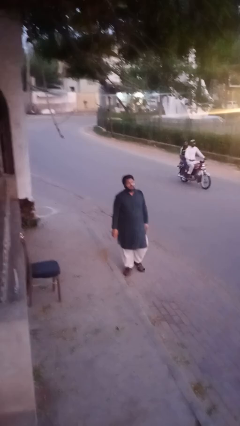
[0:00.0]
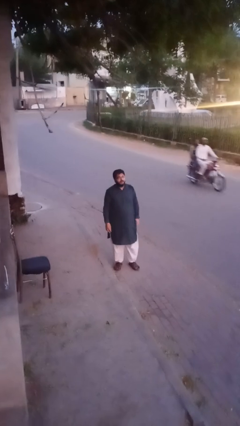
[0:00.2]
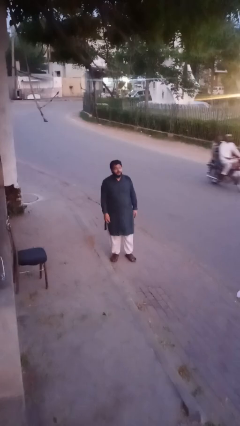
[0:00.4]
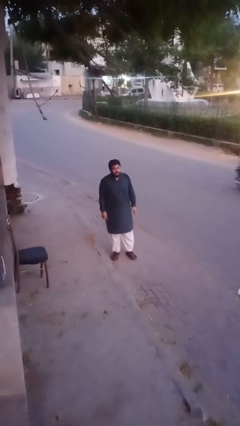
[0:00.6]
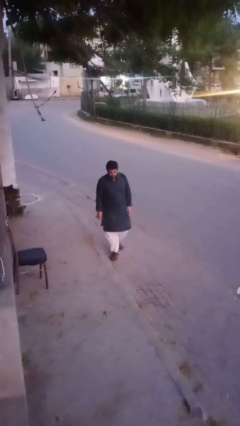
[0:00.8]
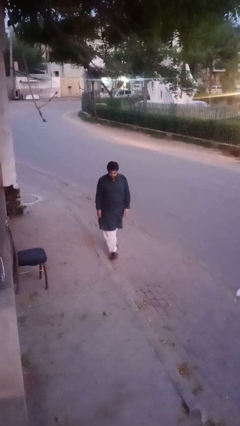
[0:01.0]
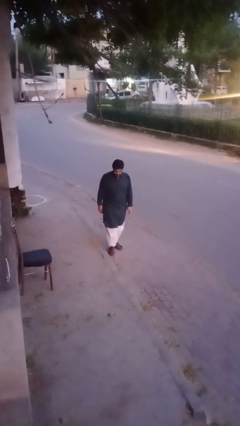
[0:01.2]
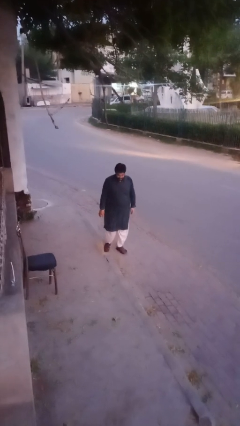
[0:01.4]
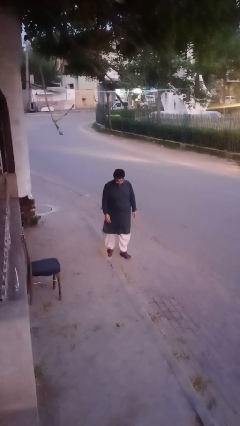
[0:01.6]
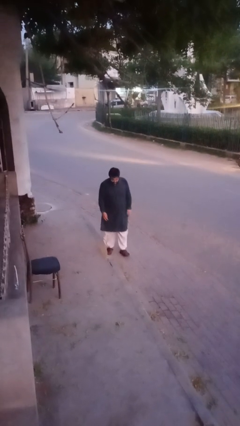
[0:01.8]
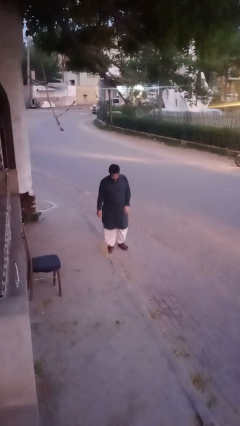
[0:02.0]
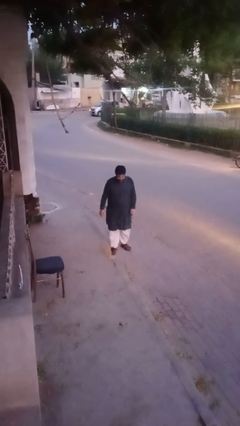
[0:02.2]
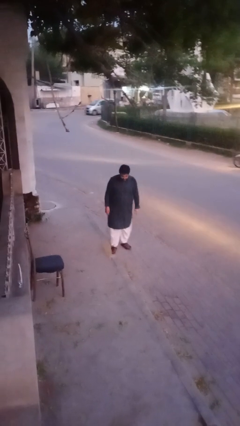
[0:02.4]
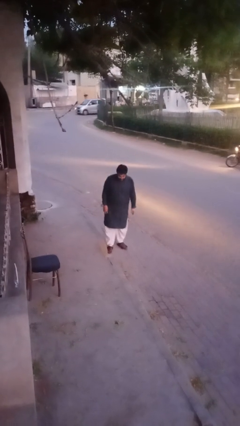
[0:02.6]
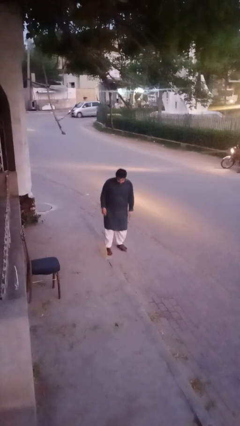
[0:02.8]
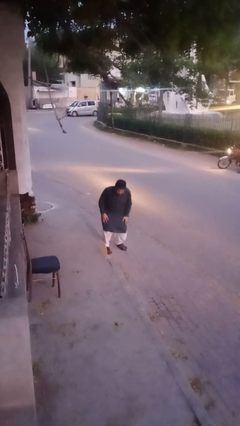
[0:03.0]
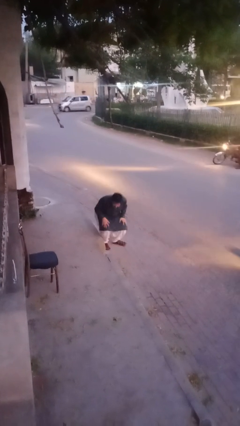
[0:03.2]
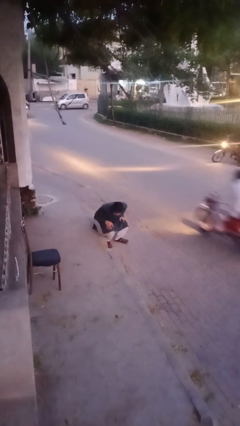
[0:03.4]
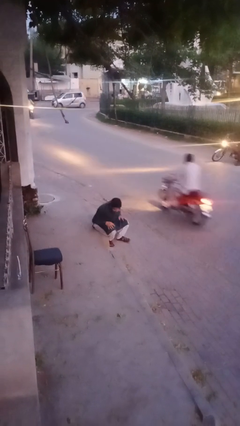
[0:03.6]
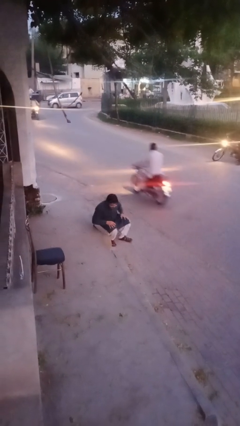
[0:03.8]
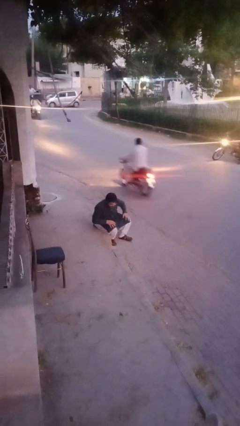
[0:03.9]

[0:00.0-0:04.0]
person trips on object on floor

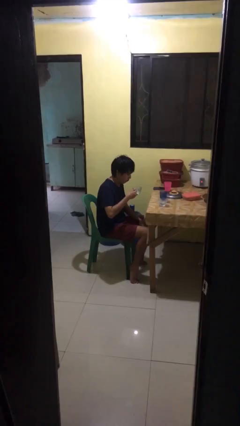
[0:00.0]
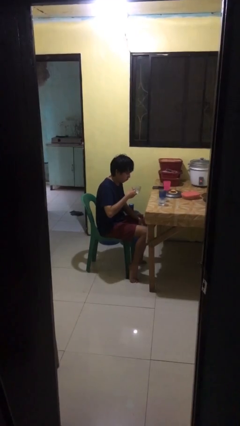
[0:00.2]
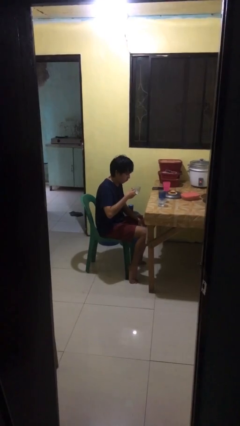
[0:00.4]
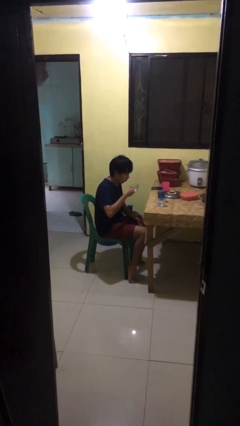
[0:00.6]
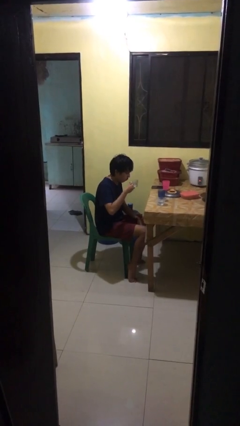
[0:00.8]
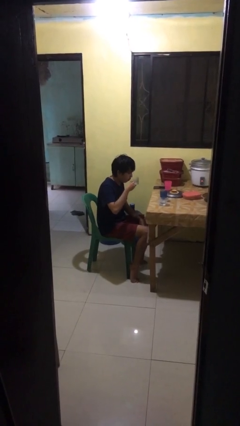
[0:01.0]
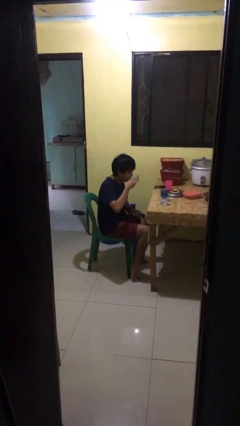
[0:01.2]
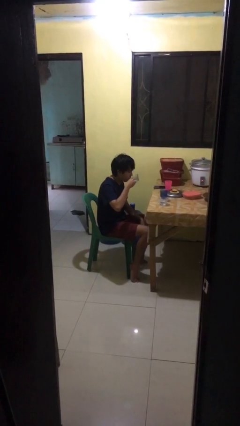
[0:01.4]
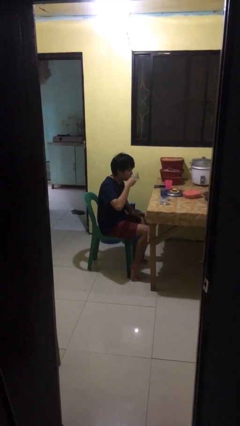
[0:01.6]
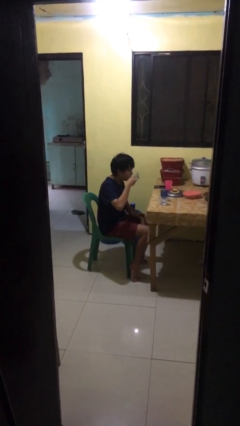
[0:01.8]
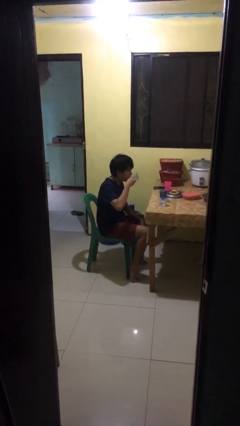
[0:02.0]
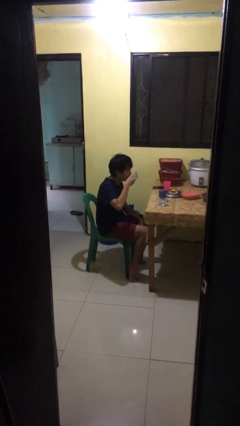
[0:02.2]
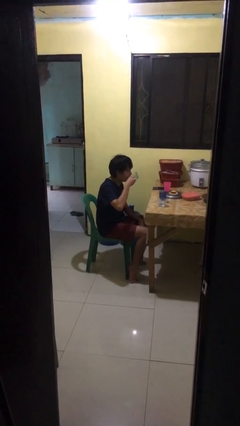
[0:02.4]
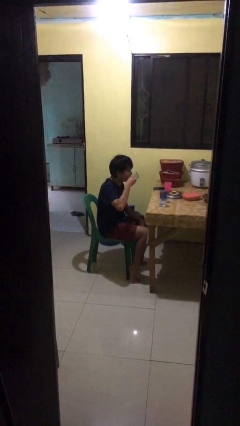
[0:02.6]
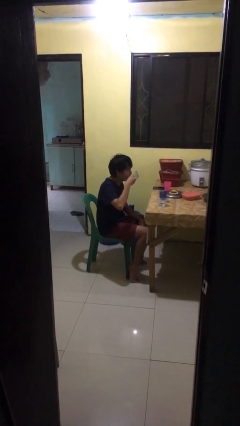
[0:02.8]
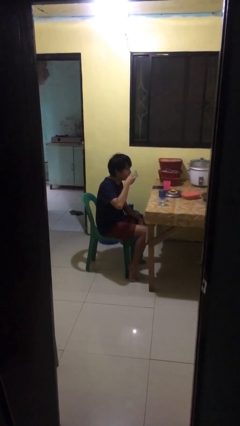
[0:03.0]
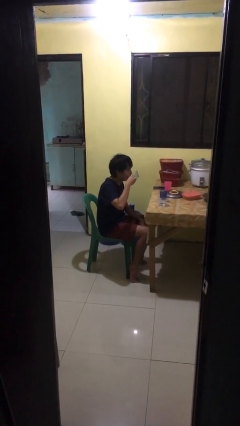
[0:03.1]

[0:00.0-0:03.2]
person drinks from shotglass

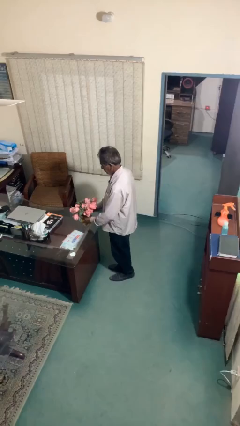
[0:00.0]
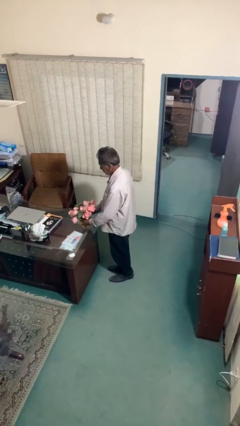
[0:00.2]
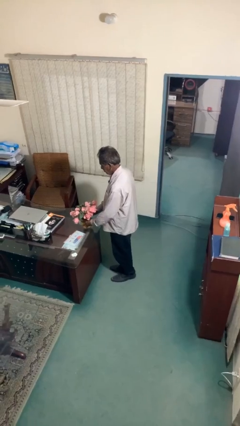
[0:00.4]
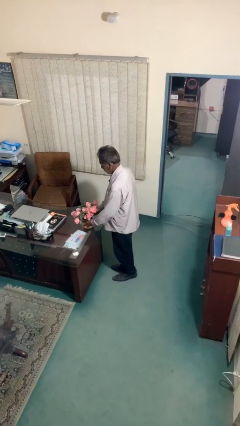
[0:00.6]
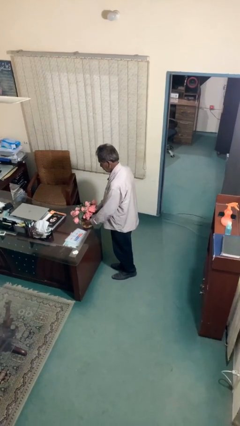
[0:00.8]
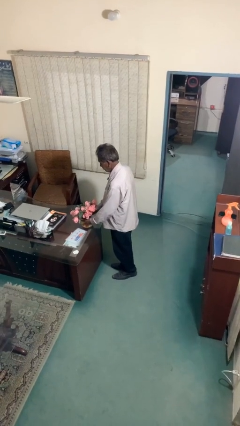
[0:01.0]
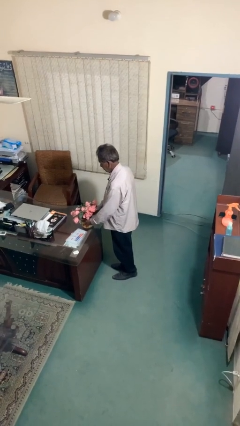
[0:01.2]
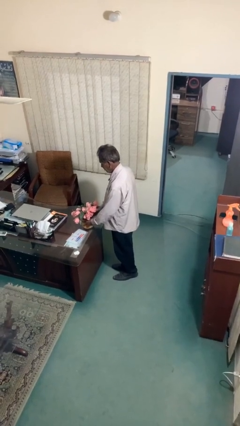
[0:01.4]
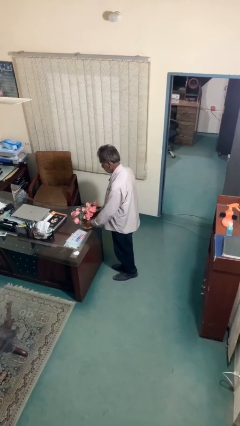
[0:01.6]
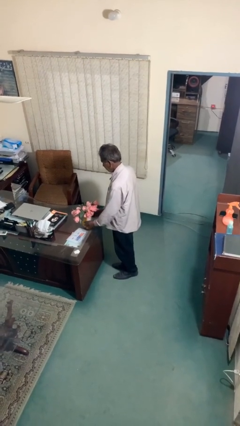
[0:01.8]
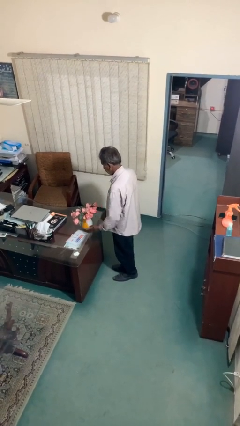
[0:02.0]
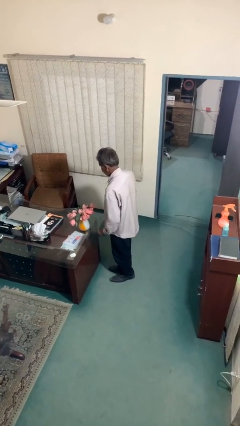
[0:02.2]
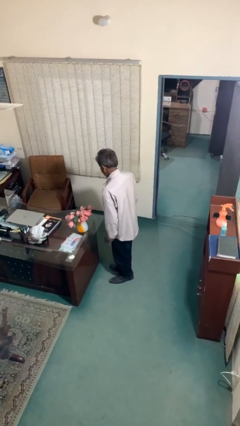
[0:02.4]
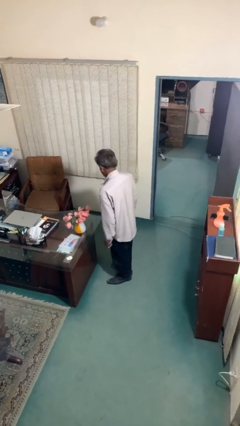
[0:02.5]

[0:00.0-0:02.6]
person puts down object on floor

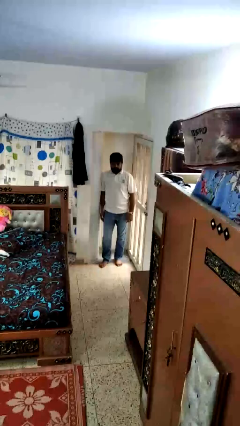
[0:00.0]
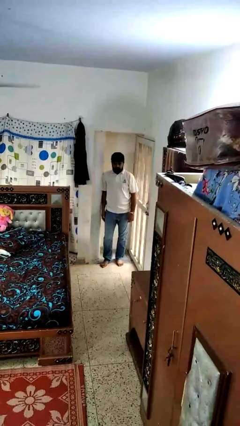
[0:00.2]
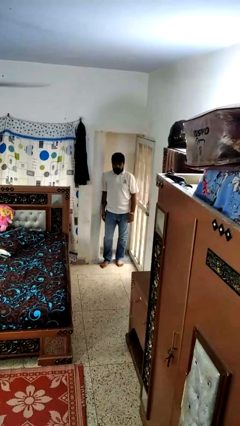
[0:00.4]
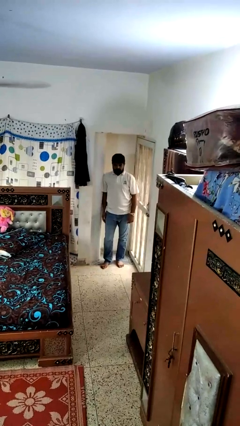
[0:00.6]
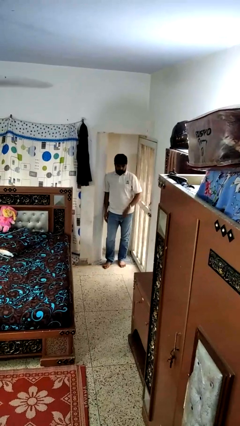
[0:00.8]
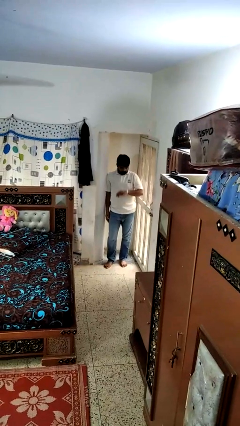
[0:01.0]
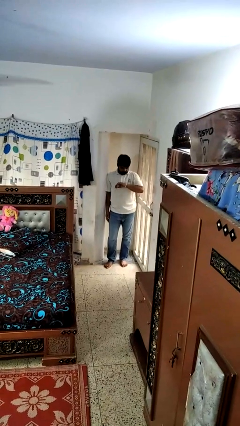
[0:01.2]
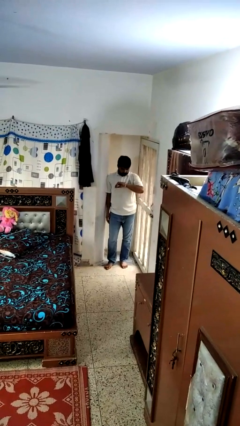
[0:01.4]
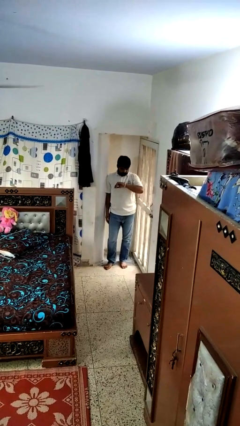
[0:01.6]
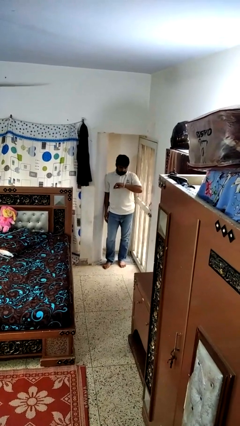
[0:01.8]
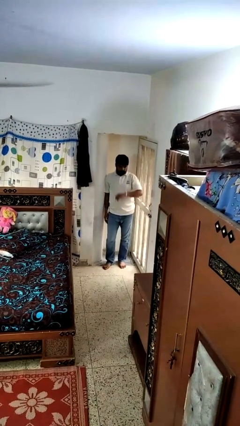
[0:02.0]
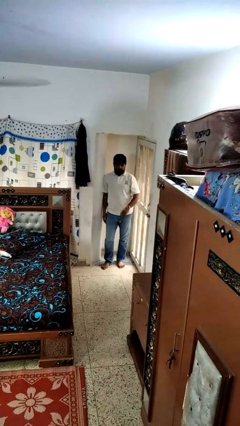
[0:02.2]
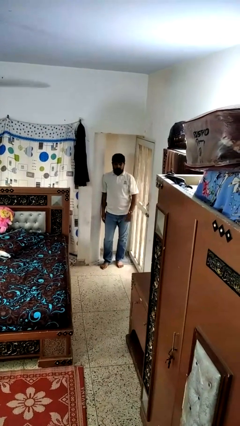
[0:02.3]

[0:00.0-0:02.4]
person looks at wristwatch

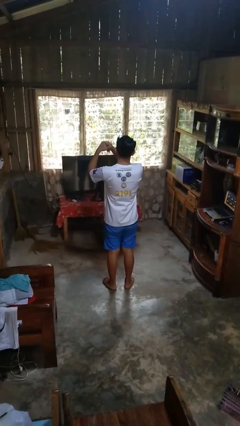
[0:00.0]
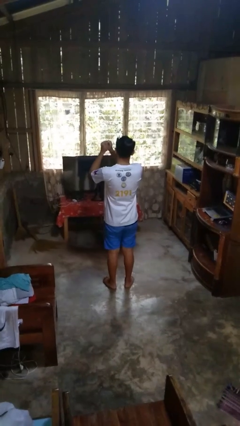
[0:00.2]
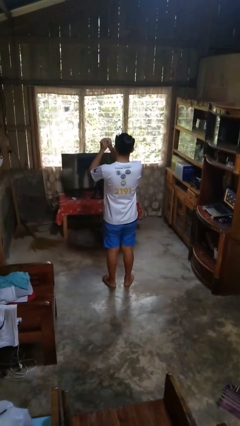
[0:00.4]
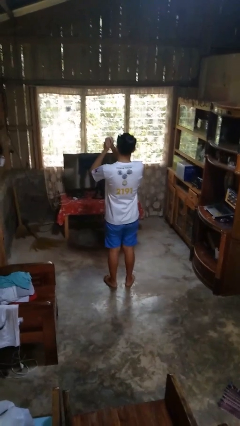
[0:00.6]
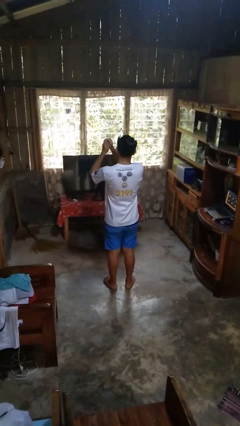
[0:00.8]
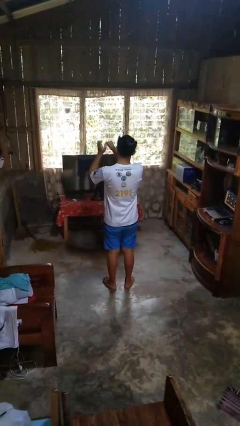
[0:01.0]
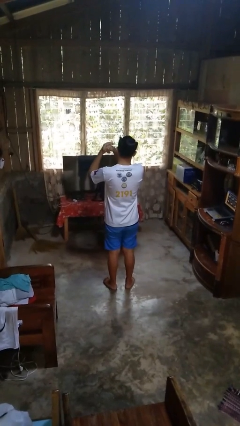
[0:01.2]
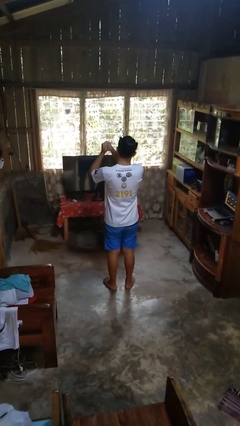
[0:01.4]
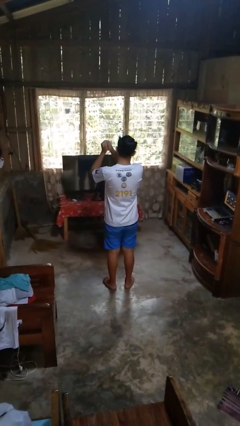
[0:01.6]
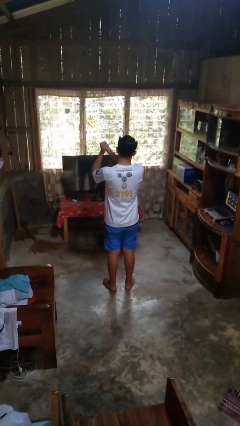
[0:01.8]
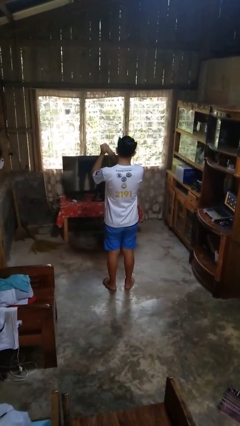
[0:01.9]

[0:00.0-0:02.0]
person cracks knuckles

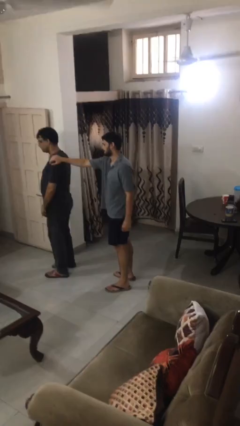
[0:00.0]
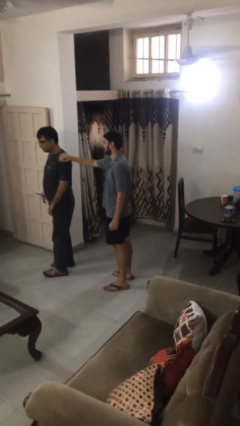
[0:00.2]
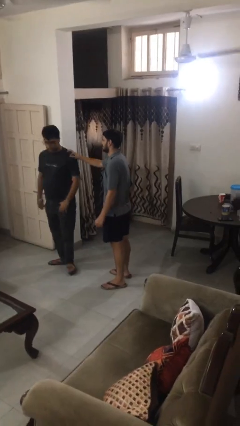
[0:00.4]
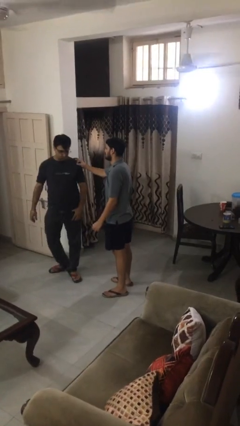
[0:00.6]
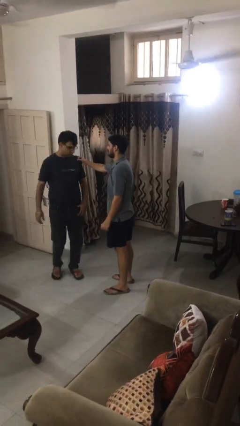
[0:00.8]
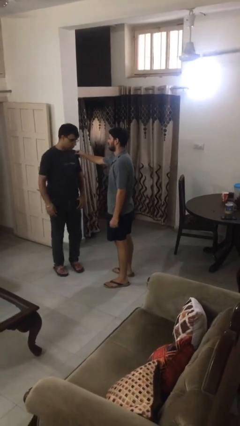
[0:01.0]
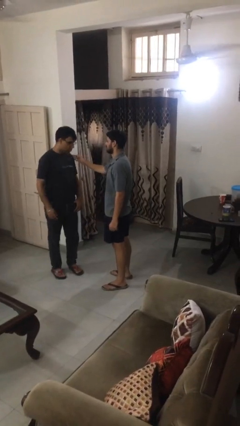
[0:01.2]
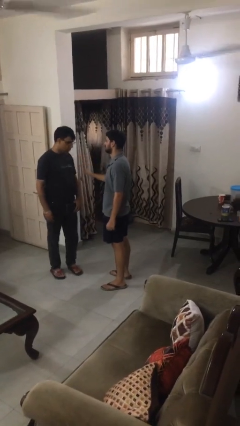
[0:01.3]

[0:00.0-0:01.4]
person spins person around

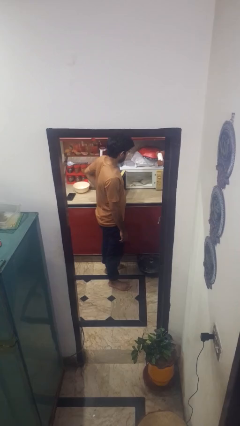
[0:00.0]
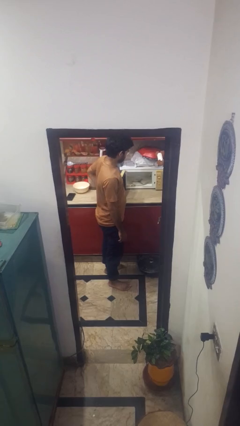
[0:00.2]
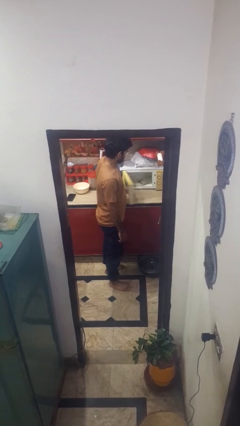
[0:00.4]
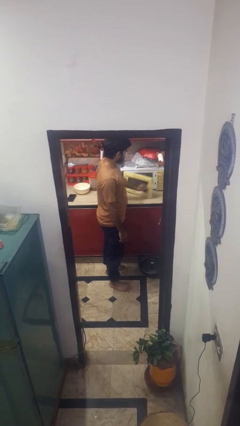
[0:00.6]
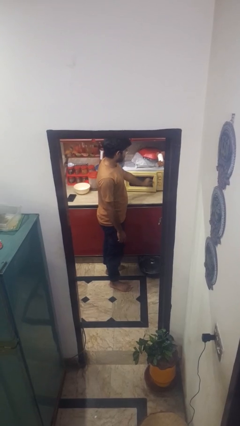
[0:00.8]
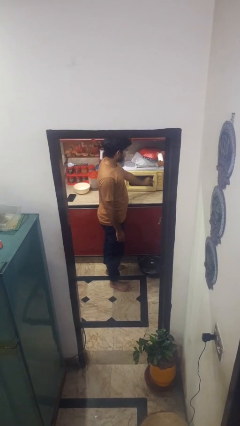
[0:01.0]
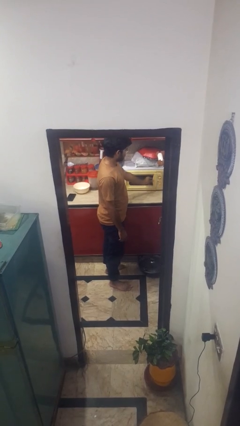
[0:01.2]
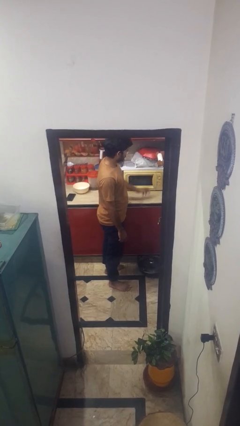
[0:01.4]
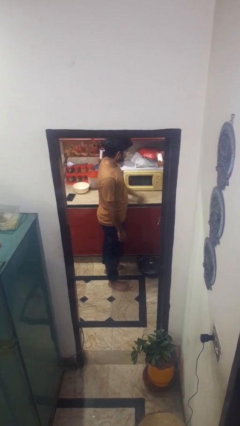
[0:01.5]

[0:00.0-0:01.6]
person closes microwave
